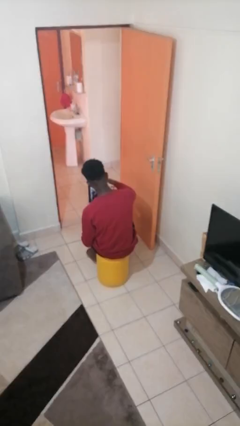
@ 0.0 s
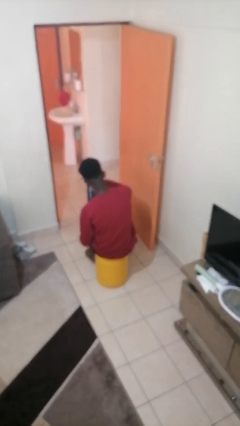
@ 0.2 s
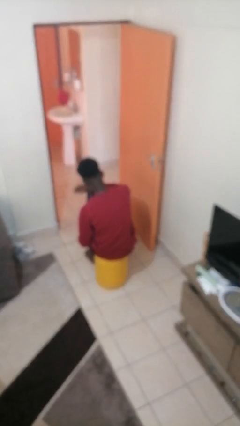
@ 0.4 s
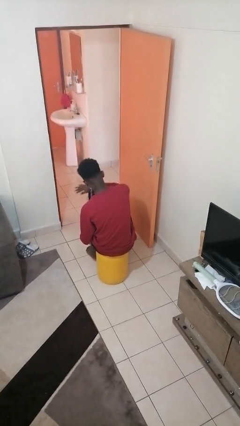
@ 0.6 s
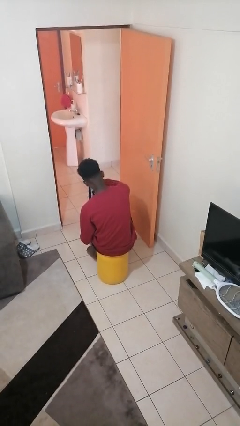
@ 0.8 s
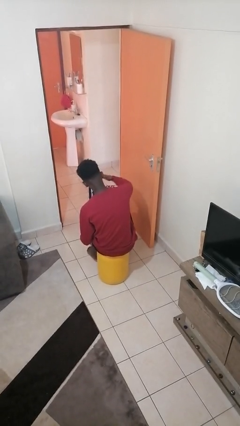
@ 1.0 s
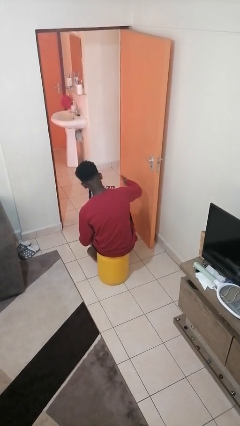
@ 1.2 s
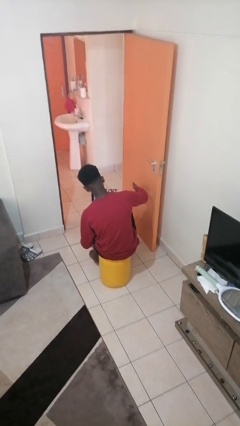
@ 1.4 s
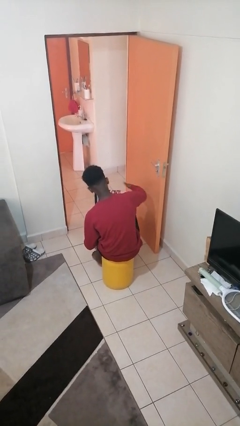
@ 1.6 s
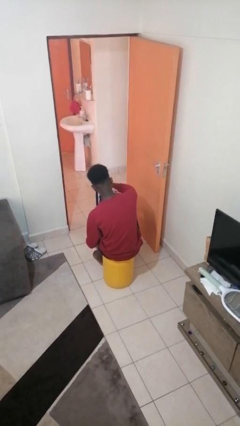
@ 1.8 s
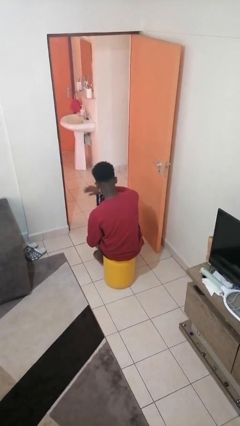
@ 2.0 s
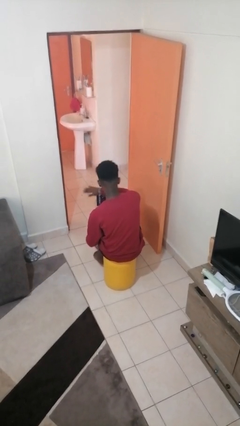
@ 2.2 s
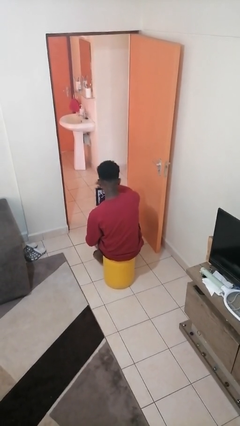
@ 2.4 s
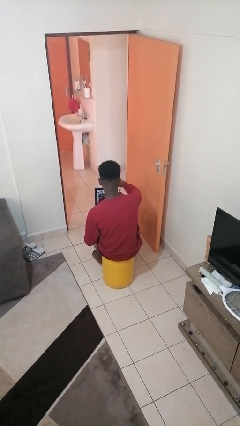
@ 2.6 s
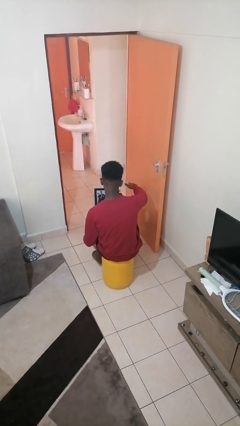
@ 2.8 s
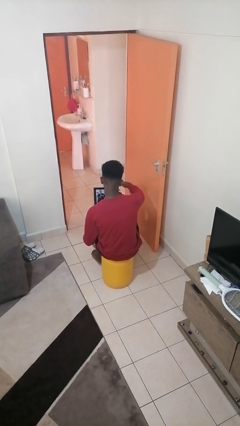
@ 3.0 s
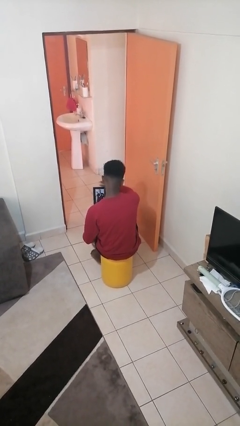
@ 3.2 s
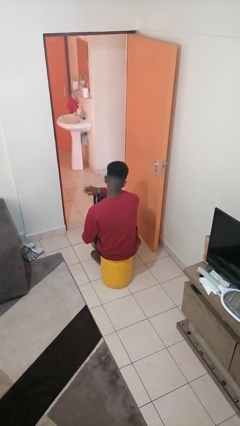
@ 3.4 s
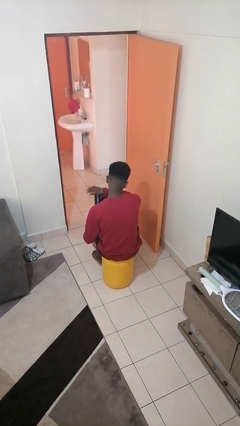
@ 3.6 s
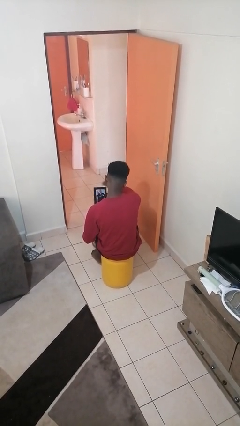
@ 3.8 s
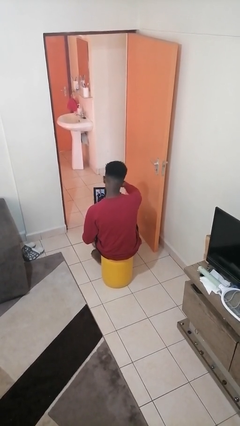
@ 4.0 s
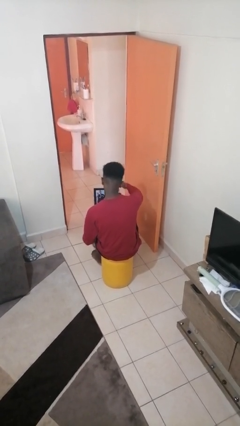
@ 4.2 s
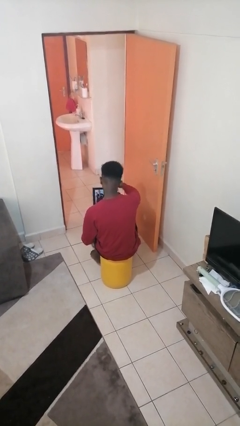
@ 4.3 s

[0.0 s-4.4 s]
person waves hand over object

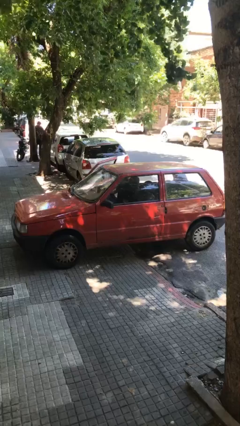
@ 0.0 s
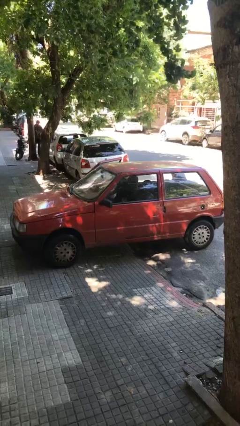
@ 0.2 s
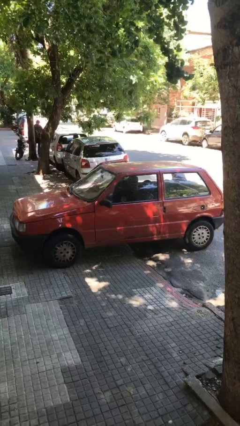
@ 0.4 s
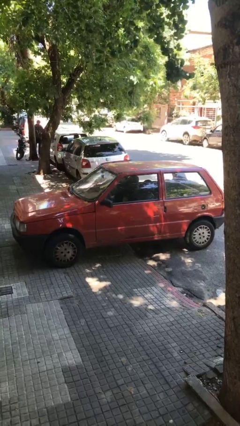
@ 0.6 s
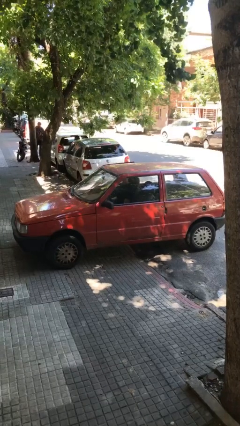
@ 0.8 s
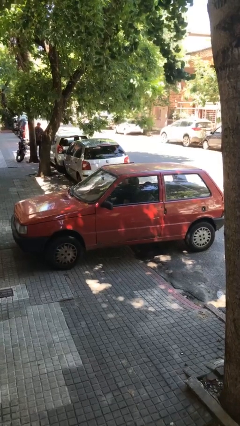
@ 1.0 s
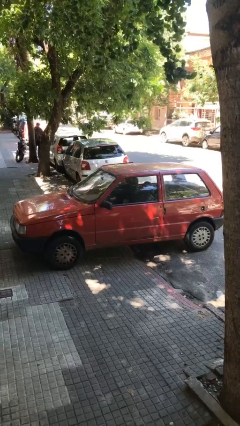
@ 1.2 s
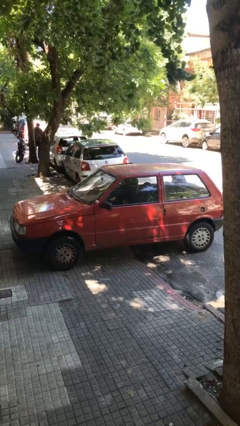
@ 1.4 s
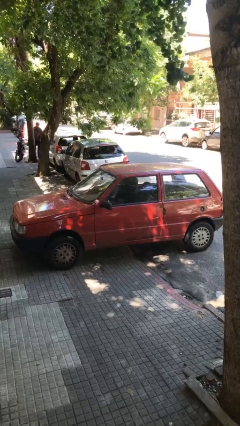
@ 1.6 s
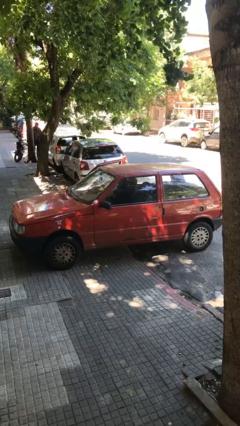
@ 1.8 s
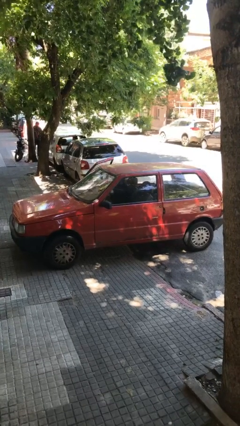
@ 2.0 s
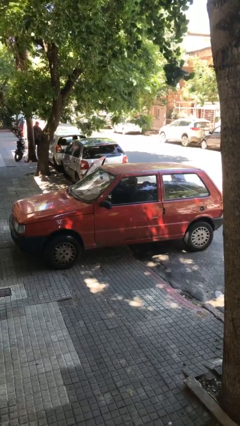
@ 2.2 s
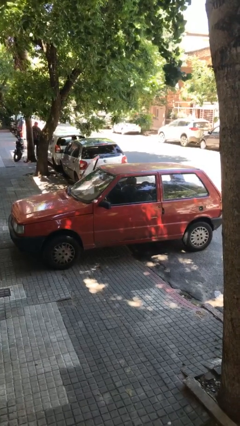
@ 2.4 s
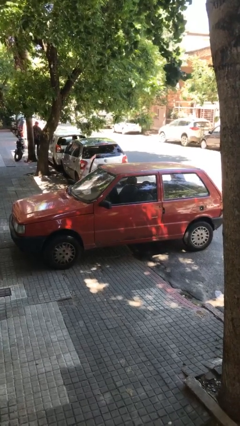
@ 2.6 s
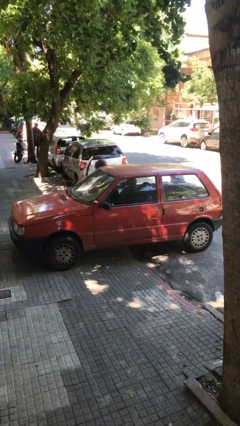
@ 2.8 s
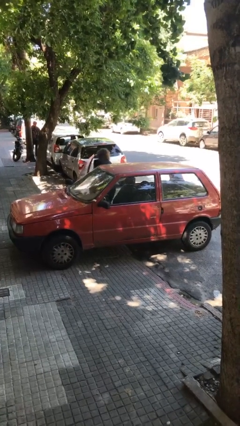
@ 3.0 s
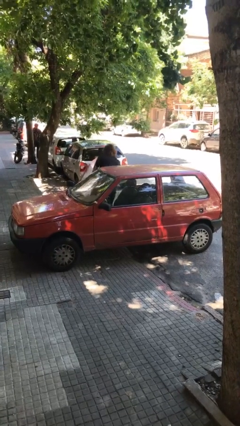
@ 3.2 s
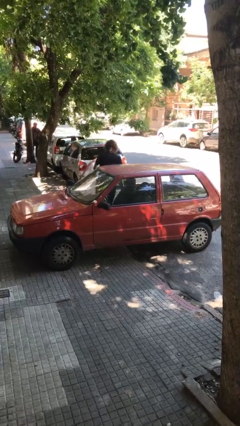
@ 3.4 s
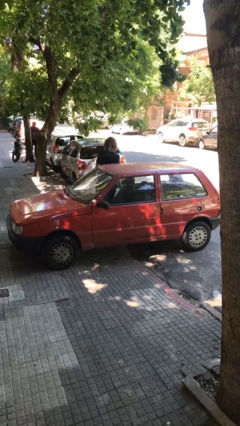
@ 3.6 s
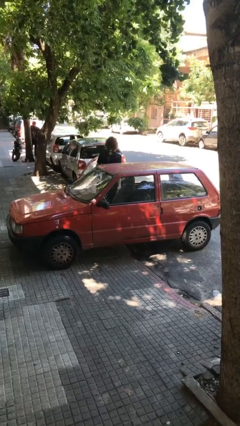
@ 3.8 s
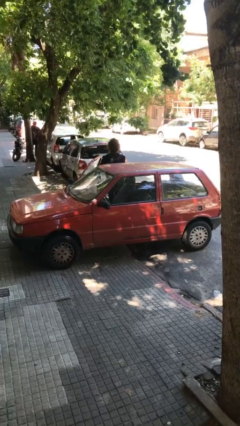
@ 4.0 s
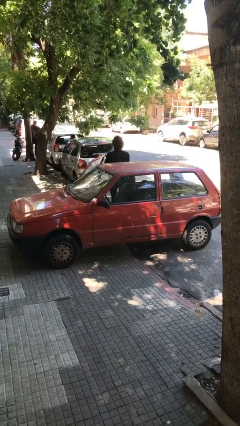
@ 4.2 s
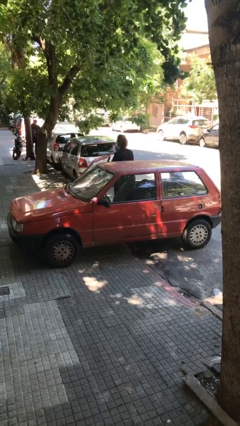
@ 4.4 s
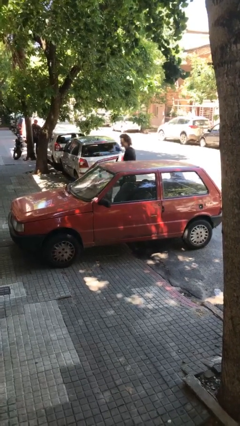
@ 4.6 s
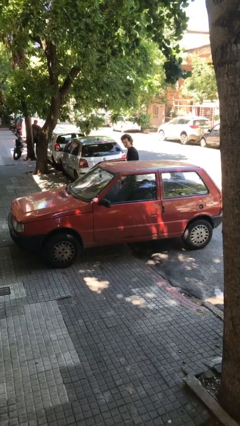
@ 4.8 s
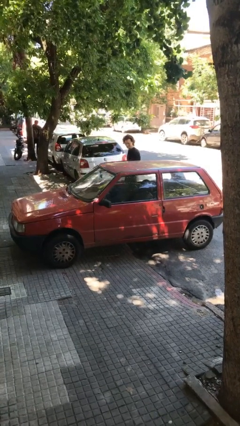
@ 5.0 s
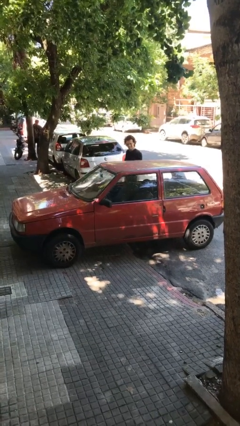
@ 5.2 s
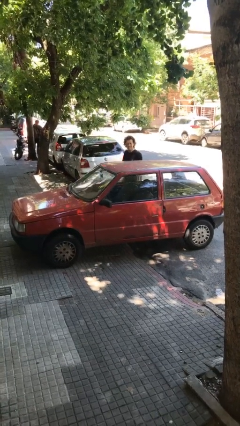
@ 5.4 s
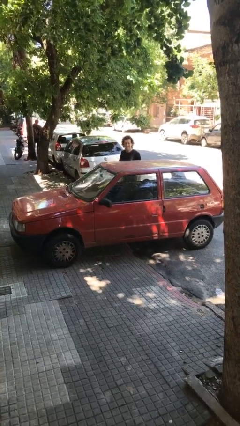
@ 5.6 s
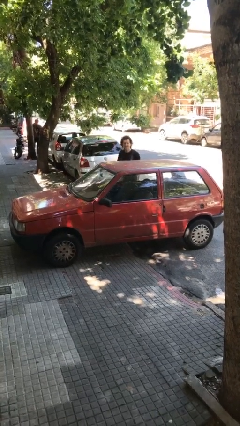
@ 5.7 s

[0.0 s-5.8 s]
car drops off person

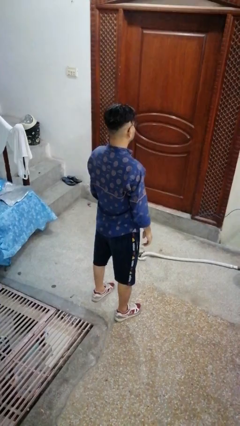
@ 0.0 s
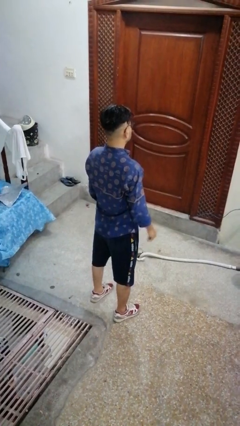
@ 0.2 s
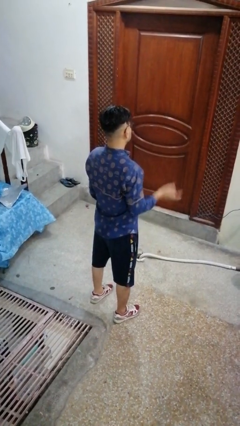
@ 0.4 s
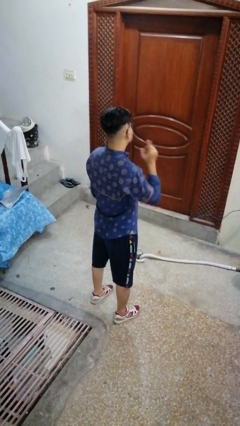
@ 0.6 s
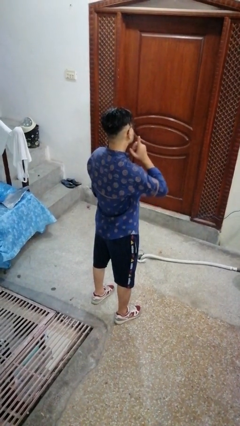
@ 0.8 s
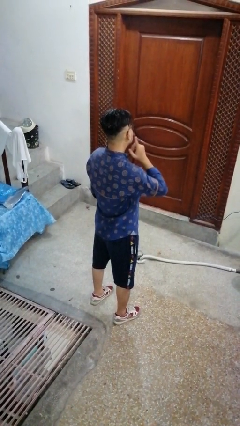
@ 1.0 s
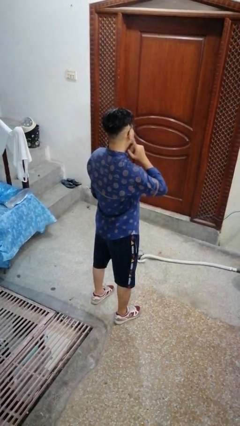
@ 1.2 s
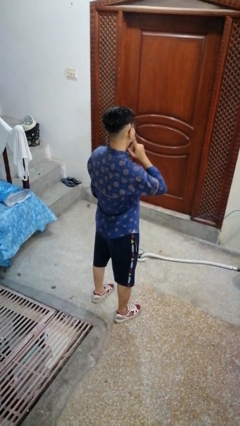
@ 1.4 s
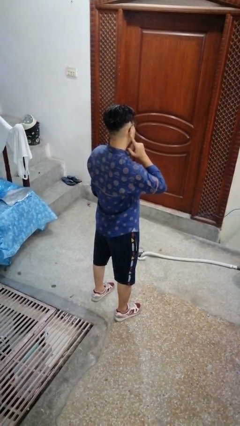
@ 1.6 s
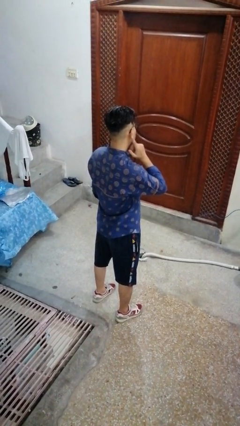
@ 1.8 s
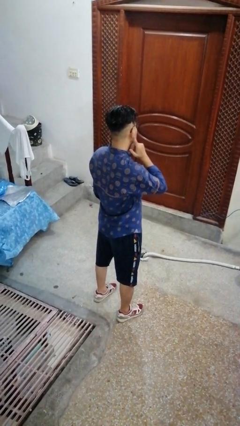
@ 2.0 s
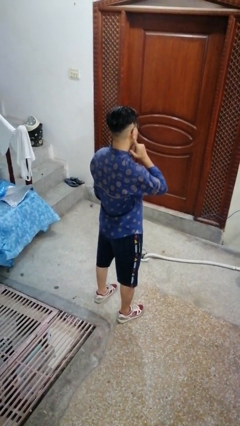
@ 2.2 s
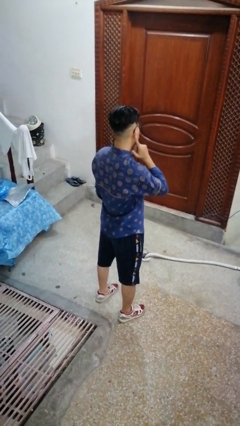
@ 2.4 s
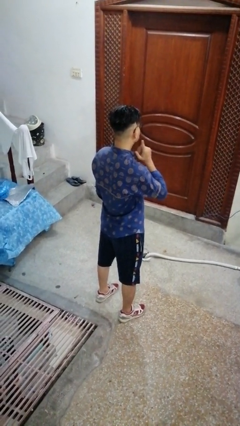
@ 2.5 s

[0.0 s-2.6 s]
person gestures listen closely

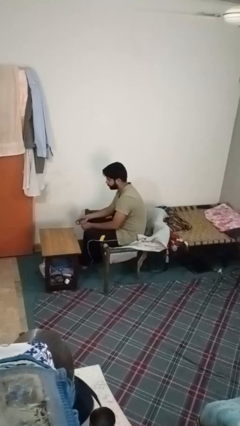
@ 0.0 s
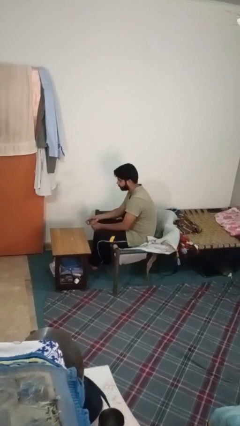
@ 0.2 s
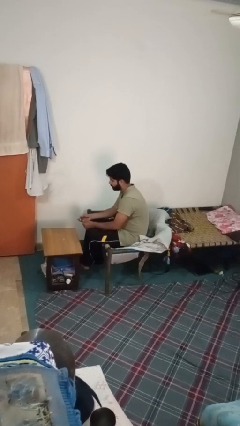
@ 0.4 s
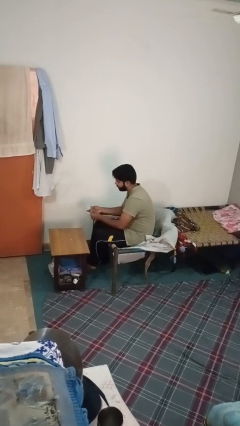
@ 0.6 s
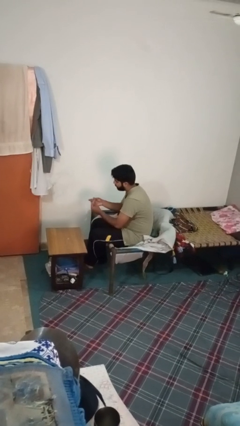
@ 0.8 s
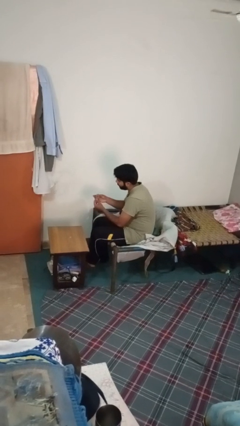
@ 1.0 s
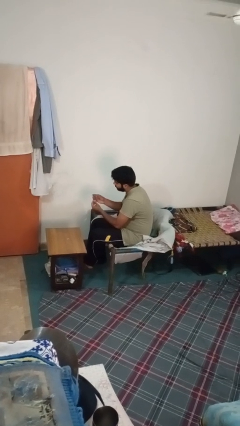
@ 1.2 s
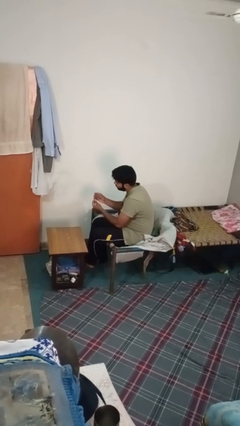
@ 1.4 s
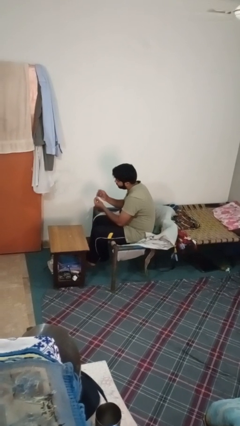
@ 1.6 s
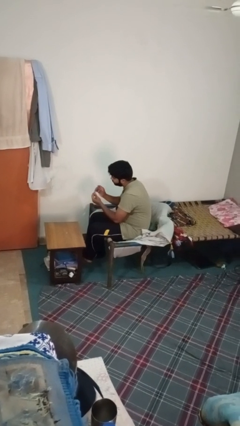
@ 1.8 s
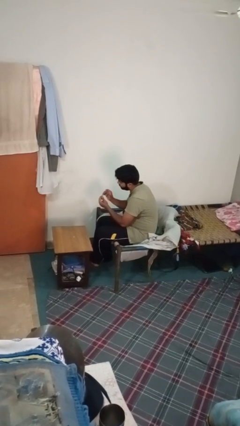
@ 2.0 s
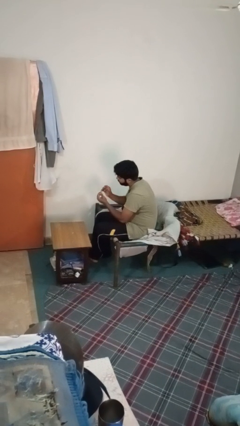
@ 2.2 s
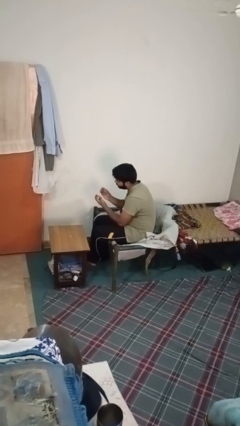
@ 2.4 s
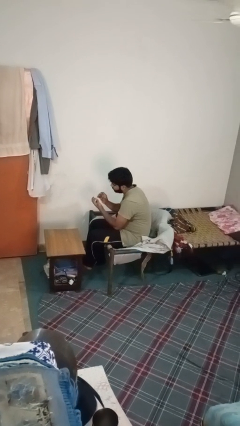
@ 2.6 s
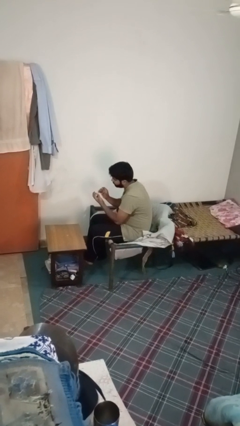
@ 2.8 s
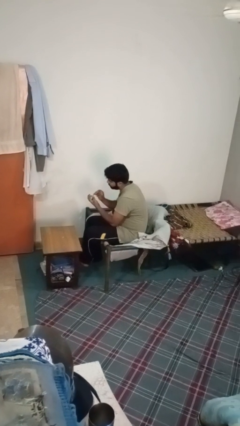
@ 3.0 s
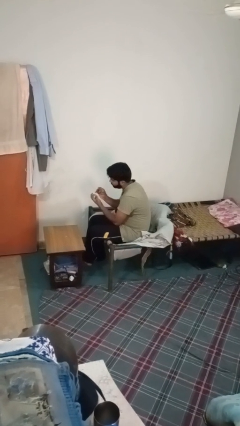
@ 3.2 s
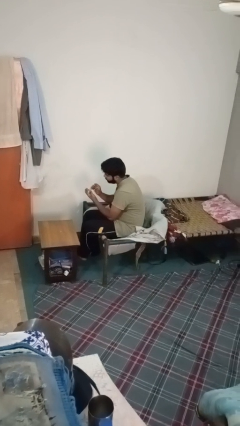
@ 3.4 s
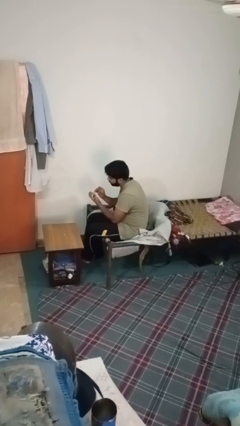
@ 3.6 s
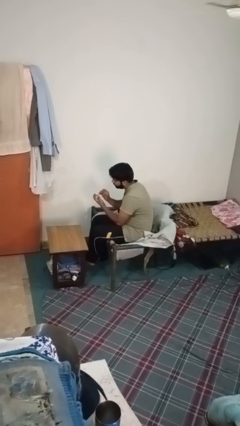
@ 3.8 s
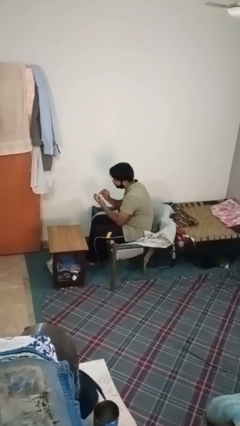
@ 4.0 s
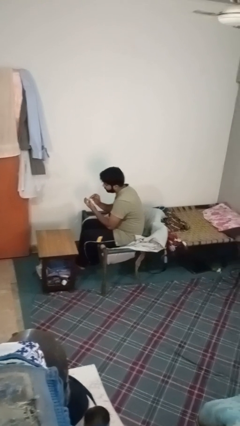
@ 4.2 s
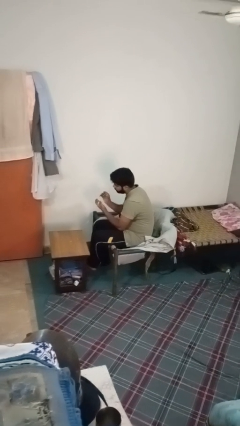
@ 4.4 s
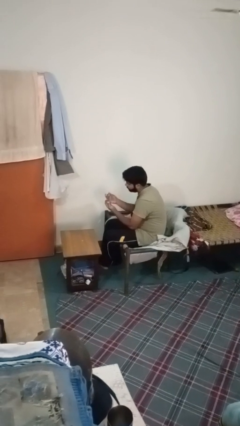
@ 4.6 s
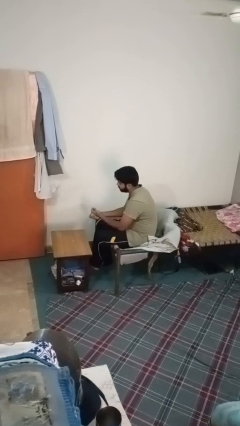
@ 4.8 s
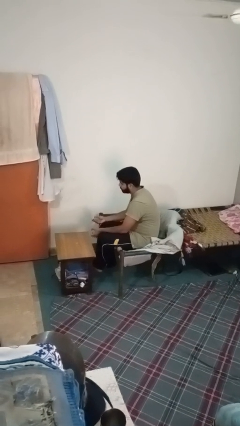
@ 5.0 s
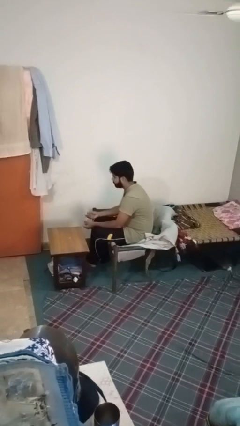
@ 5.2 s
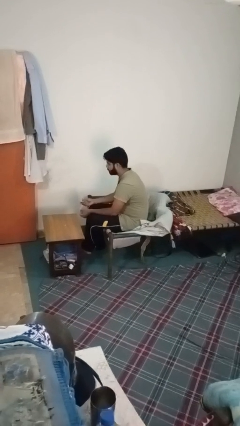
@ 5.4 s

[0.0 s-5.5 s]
person clips fingernails
